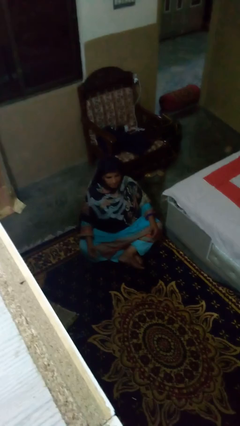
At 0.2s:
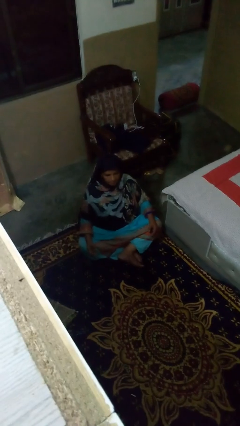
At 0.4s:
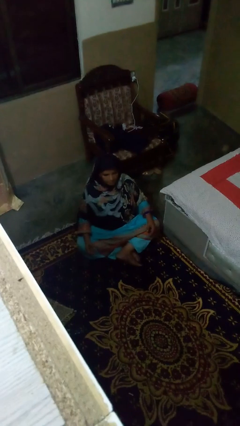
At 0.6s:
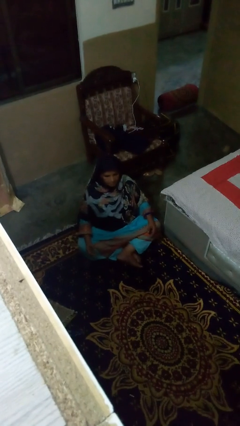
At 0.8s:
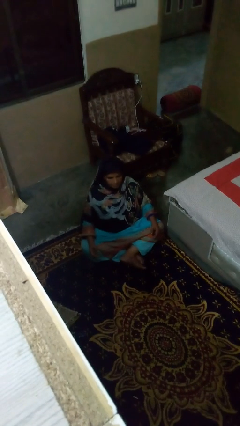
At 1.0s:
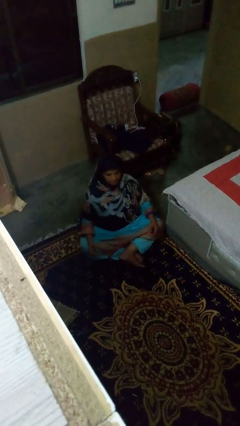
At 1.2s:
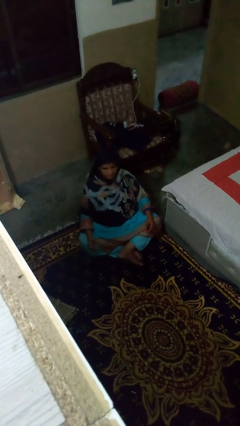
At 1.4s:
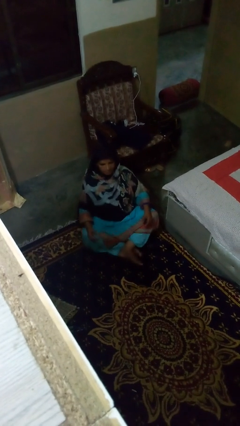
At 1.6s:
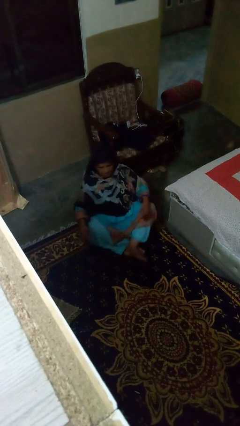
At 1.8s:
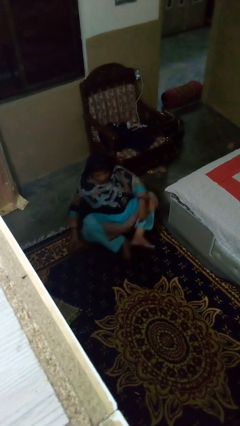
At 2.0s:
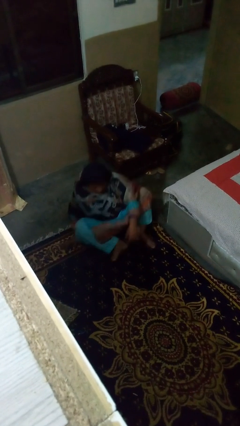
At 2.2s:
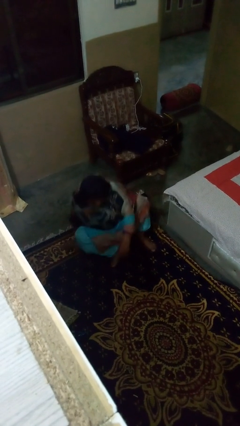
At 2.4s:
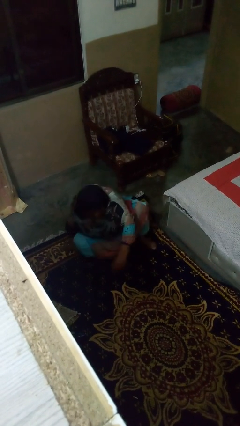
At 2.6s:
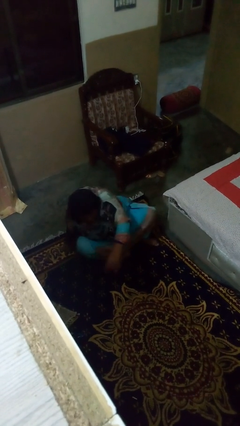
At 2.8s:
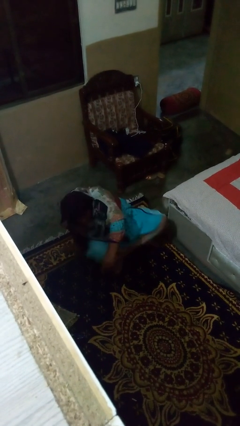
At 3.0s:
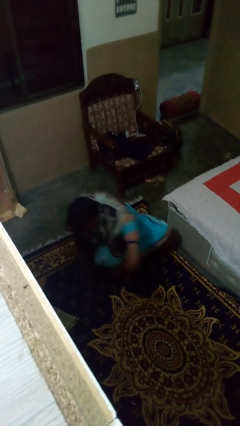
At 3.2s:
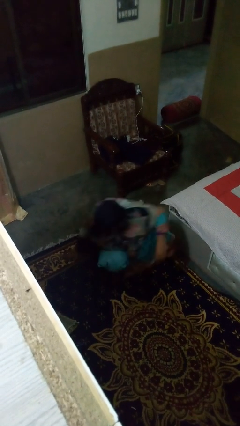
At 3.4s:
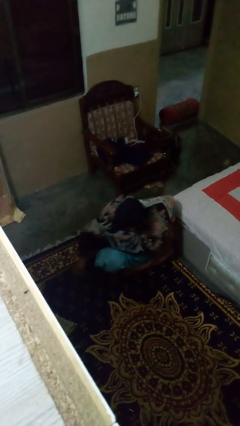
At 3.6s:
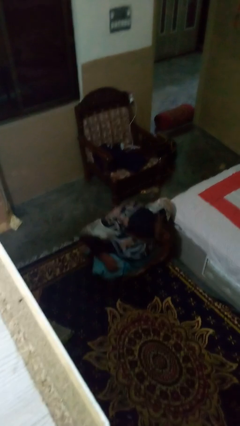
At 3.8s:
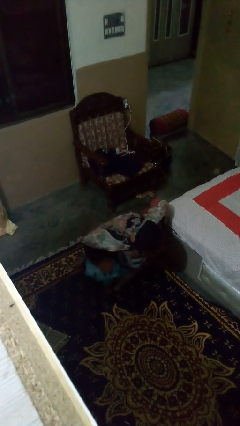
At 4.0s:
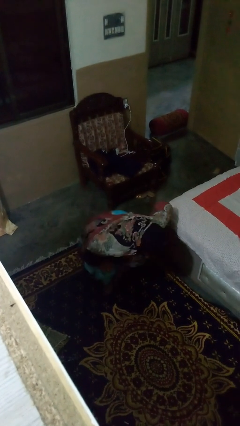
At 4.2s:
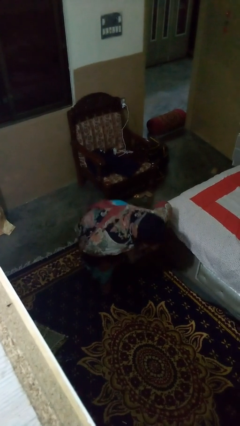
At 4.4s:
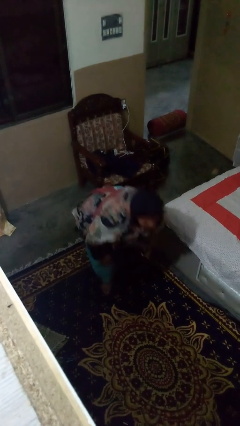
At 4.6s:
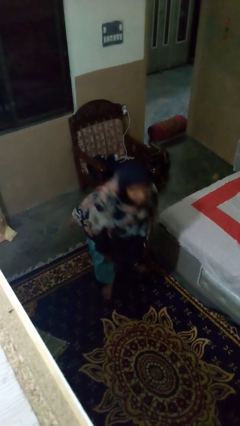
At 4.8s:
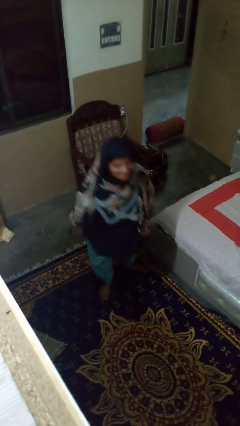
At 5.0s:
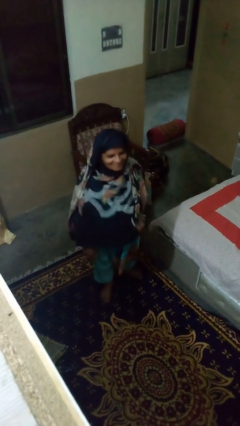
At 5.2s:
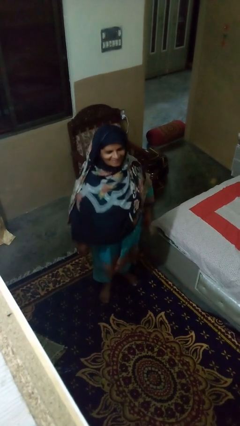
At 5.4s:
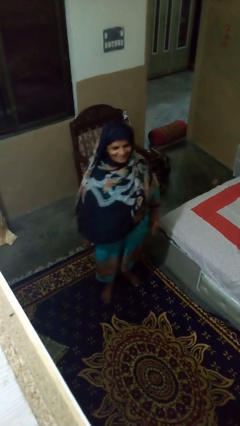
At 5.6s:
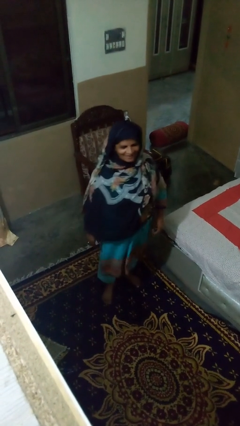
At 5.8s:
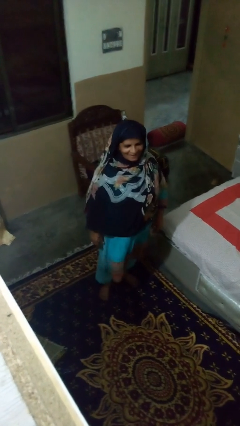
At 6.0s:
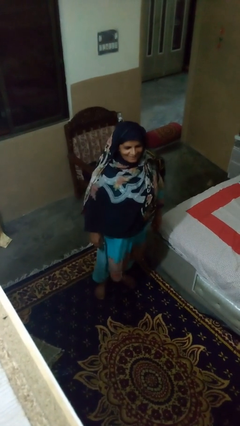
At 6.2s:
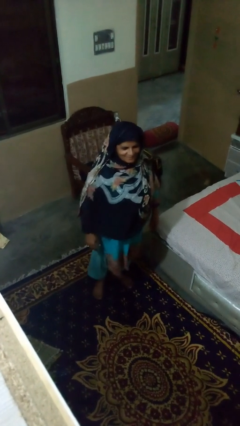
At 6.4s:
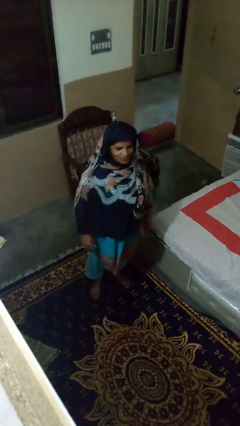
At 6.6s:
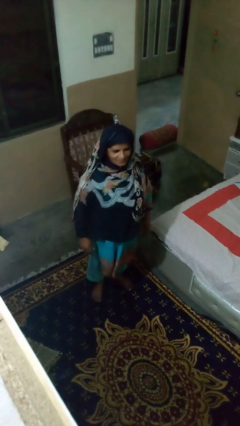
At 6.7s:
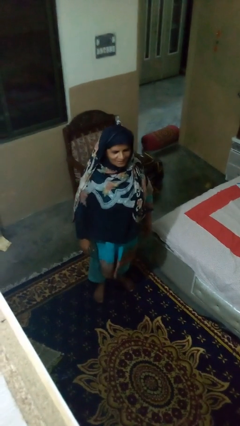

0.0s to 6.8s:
person stands up from floor

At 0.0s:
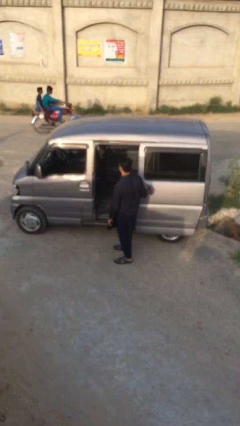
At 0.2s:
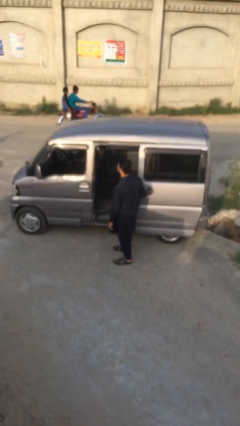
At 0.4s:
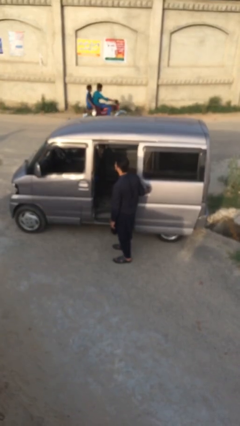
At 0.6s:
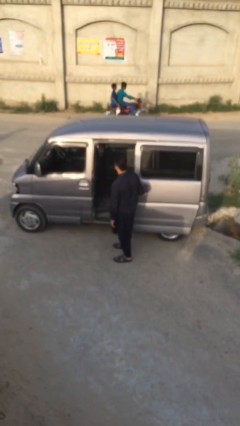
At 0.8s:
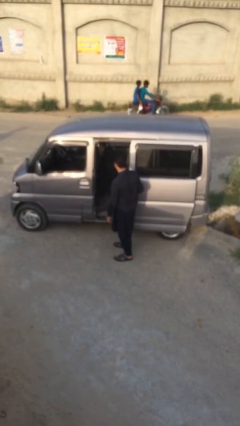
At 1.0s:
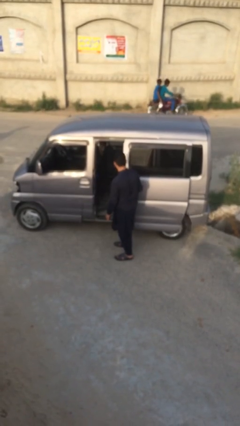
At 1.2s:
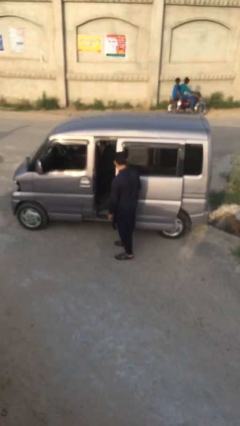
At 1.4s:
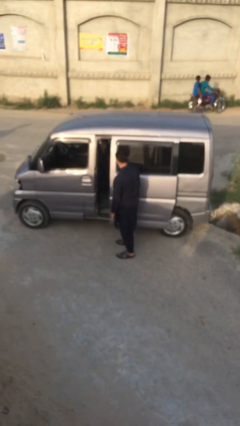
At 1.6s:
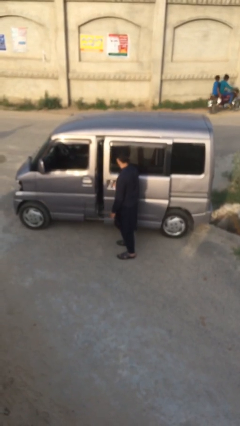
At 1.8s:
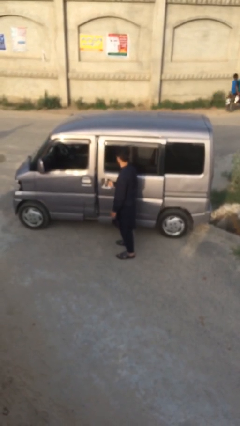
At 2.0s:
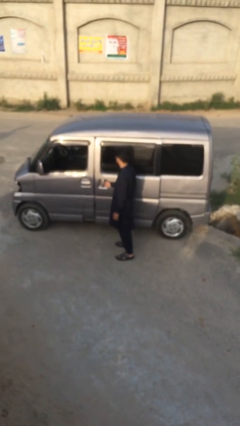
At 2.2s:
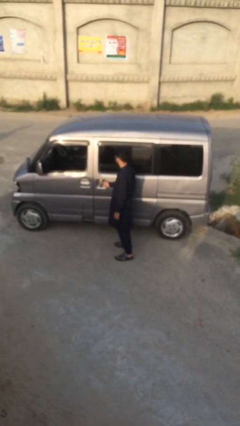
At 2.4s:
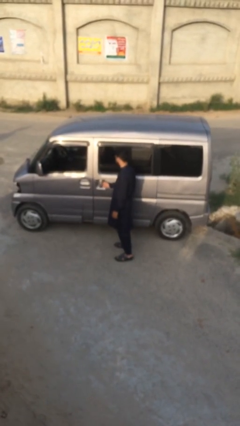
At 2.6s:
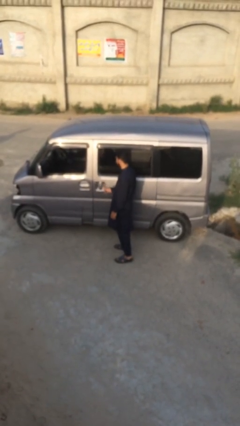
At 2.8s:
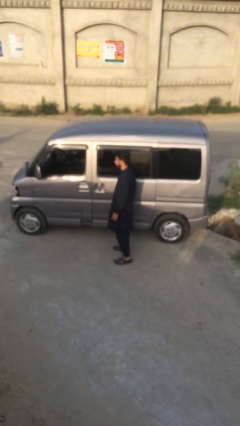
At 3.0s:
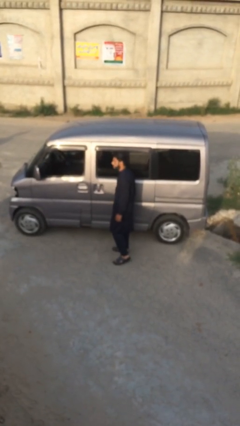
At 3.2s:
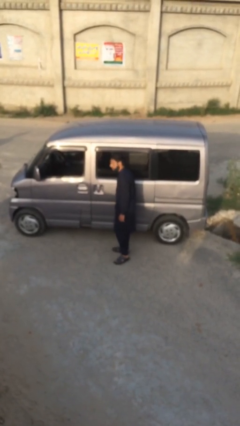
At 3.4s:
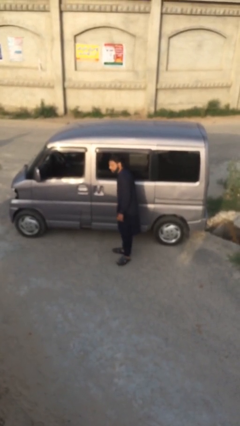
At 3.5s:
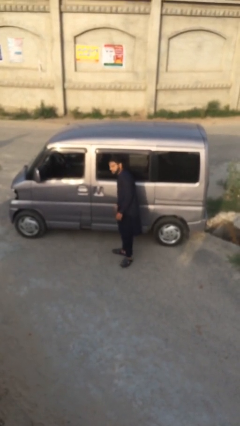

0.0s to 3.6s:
person closes car door

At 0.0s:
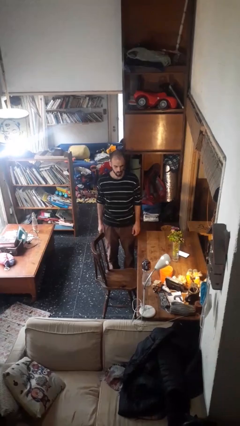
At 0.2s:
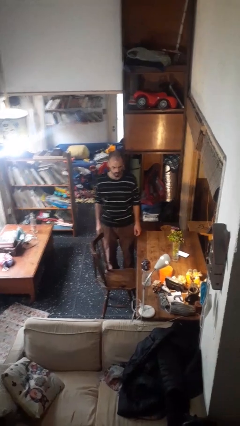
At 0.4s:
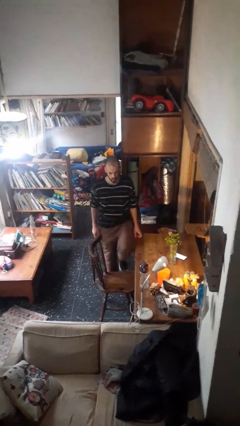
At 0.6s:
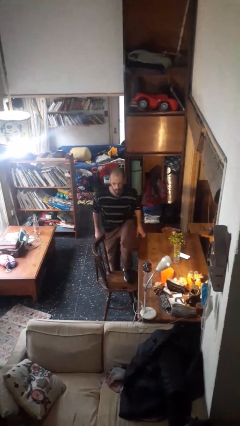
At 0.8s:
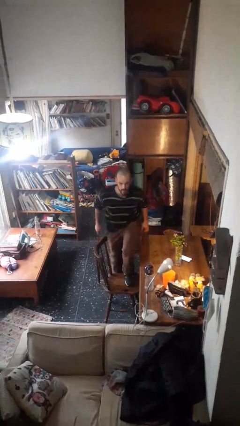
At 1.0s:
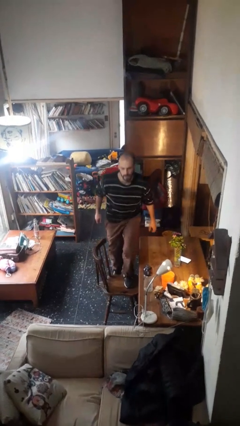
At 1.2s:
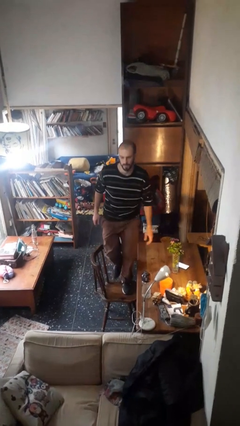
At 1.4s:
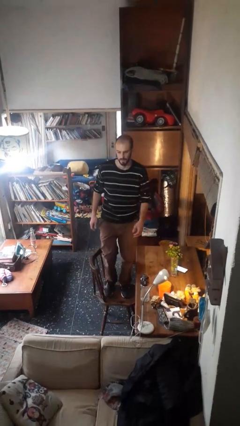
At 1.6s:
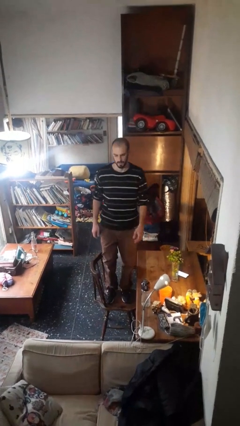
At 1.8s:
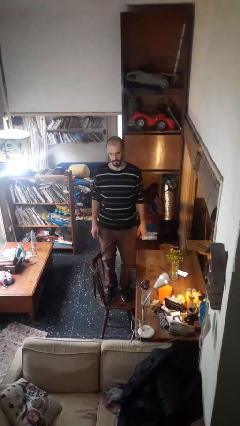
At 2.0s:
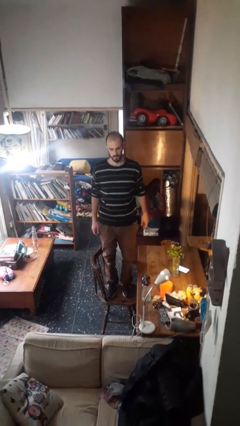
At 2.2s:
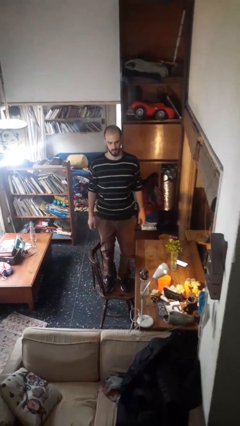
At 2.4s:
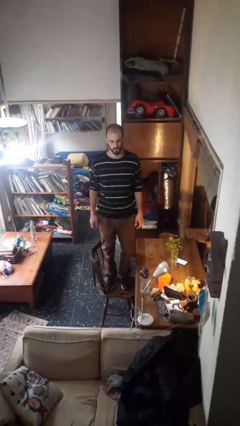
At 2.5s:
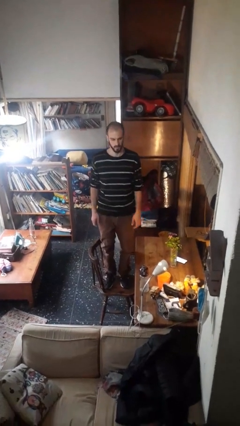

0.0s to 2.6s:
person climbs on chair

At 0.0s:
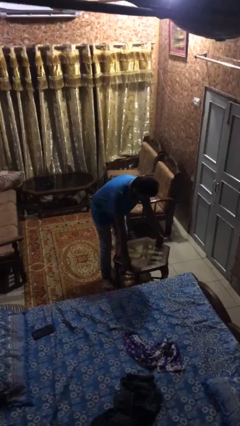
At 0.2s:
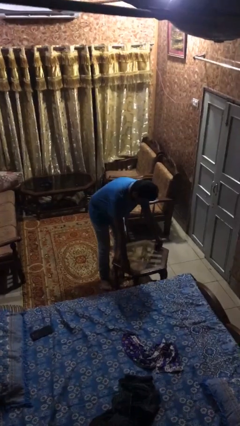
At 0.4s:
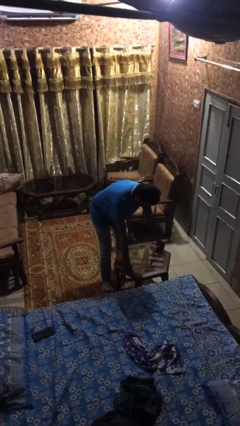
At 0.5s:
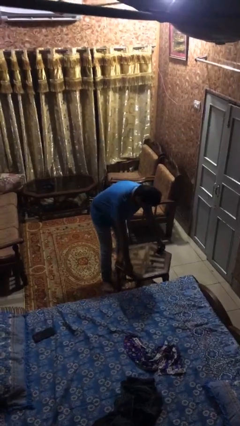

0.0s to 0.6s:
person puts down object on floor

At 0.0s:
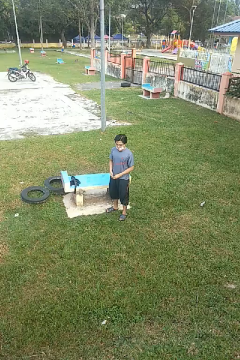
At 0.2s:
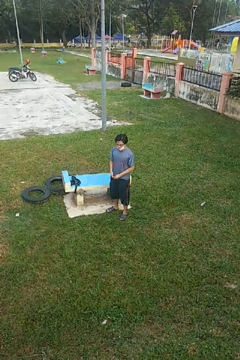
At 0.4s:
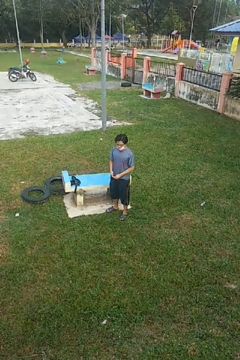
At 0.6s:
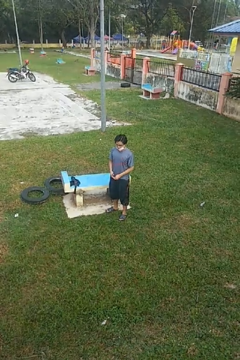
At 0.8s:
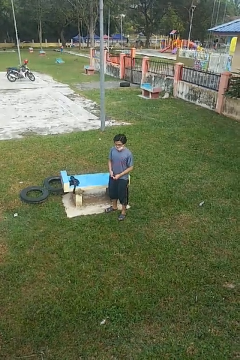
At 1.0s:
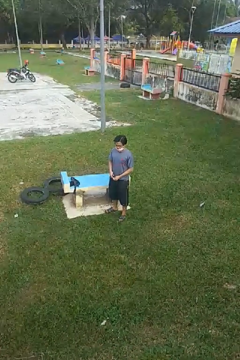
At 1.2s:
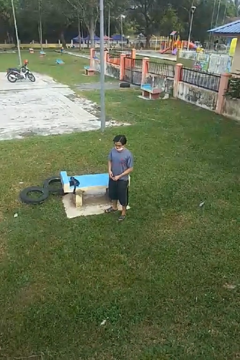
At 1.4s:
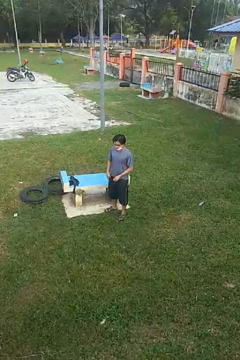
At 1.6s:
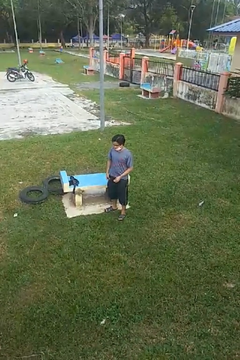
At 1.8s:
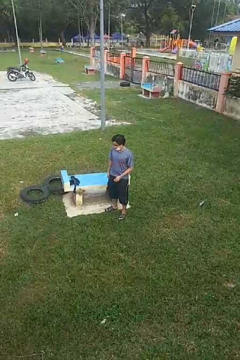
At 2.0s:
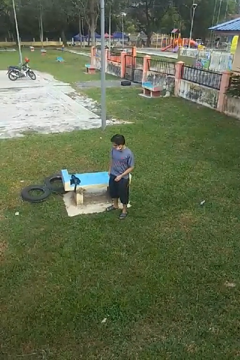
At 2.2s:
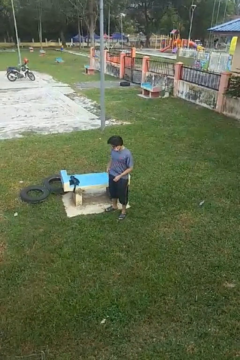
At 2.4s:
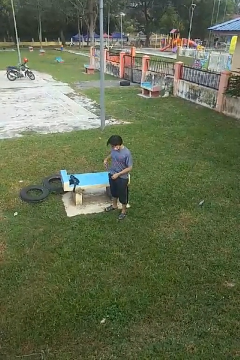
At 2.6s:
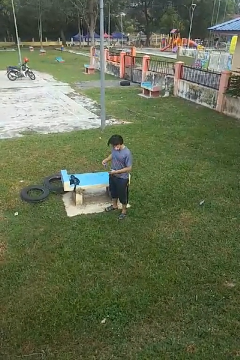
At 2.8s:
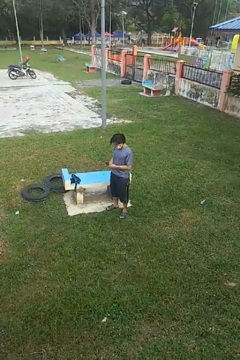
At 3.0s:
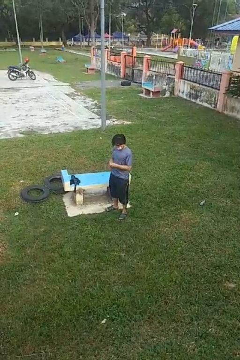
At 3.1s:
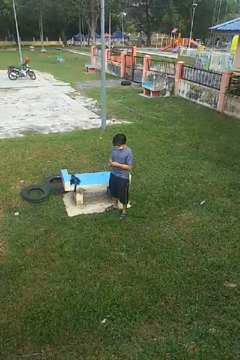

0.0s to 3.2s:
person takes phone from pocket

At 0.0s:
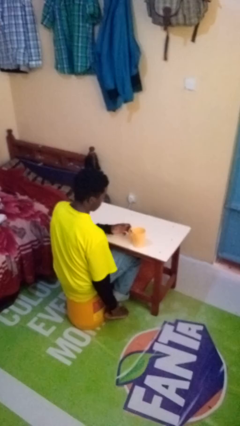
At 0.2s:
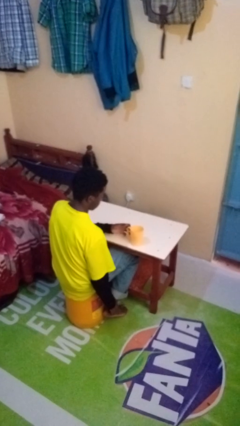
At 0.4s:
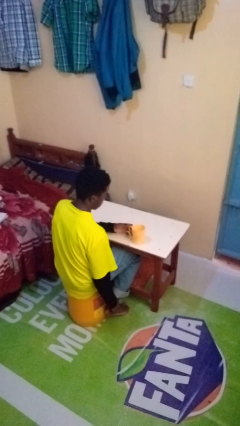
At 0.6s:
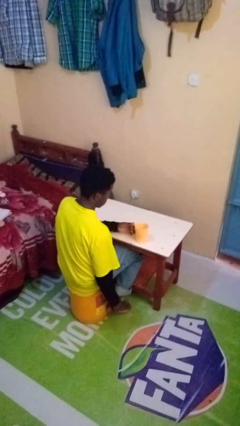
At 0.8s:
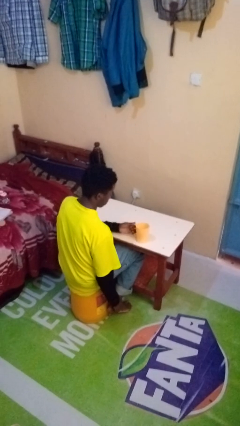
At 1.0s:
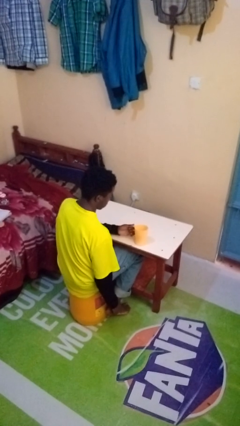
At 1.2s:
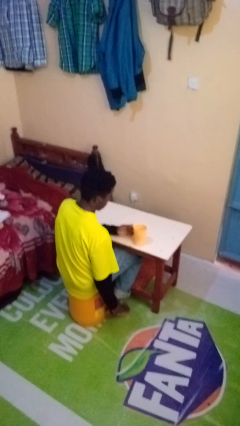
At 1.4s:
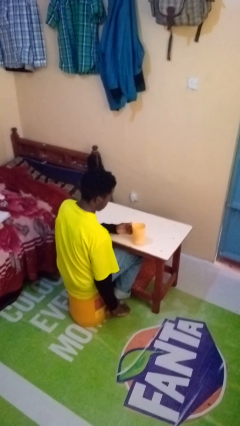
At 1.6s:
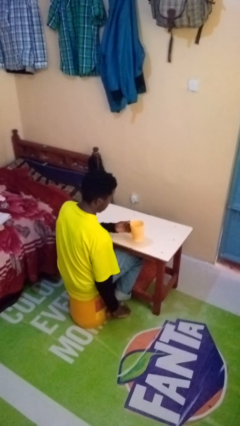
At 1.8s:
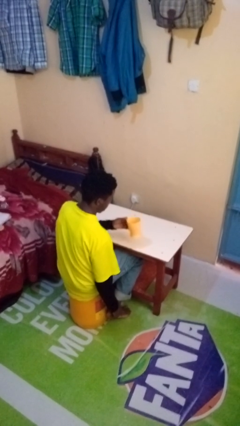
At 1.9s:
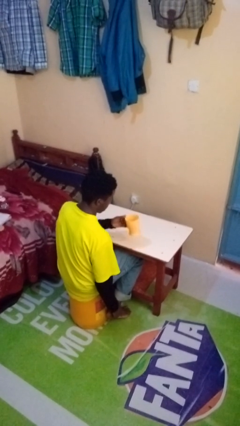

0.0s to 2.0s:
person picks up object from table
